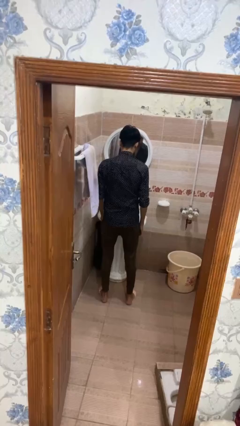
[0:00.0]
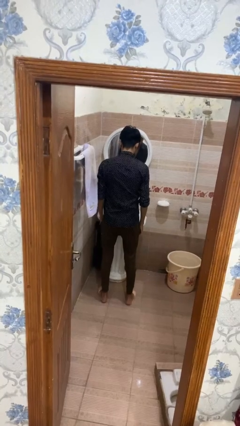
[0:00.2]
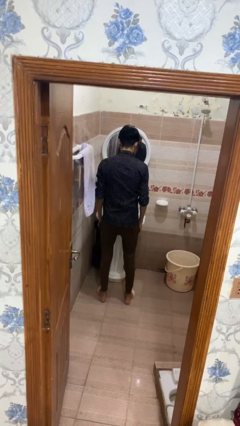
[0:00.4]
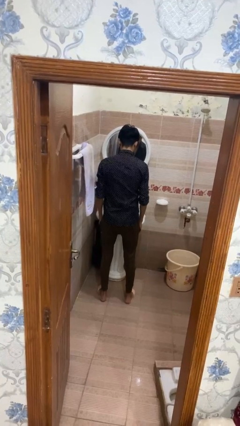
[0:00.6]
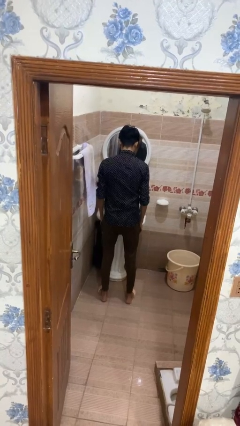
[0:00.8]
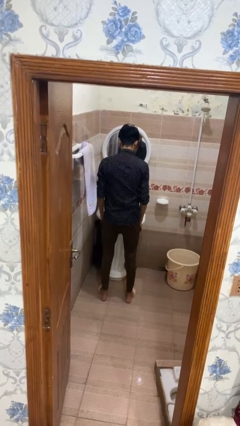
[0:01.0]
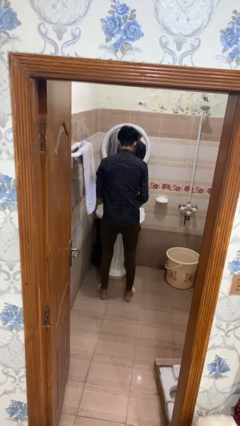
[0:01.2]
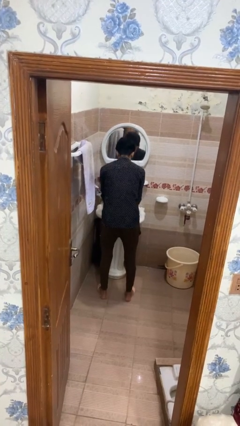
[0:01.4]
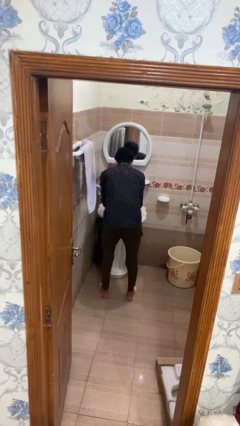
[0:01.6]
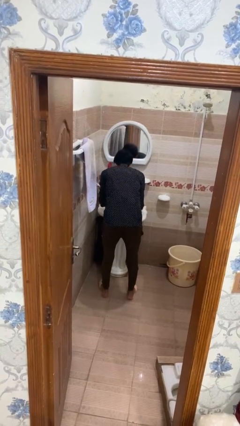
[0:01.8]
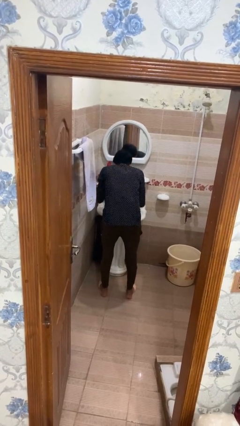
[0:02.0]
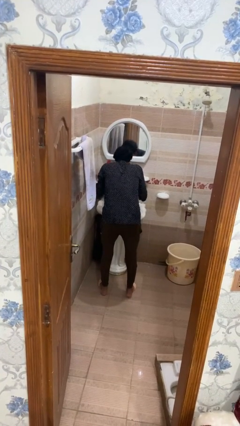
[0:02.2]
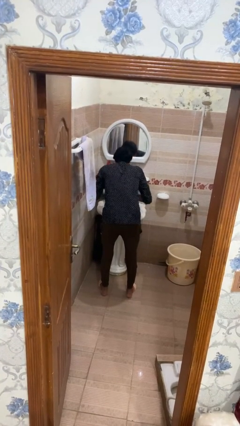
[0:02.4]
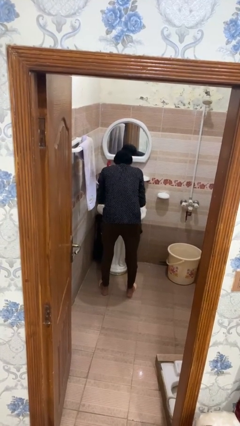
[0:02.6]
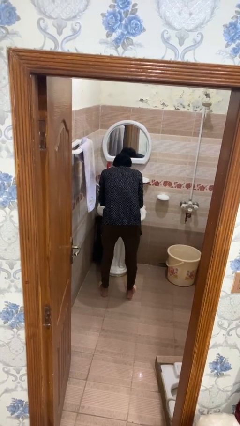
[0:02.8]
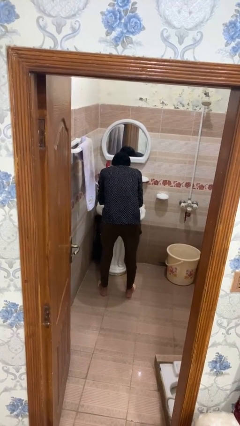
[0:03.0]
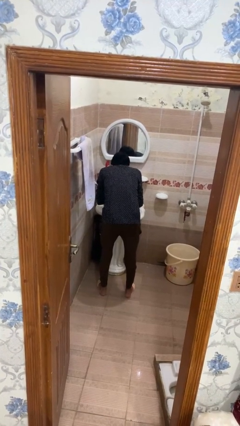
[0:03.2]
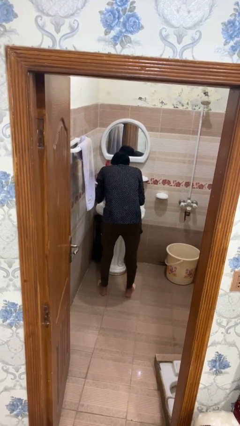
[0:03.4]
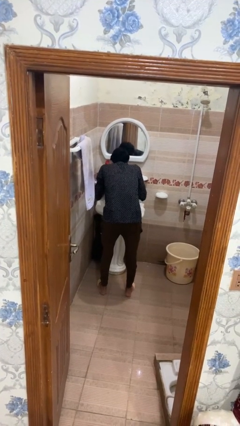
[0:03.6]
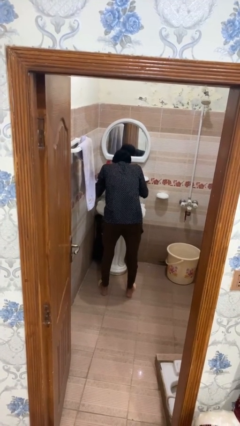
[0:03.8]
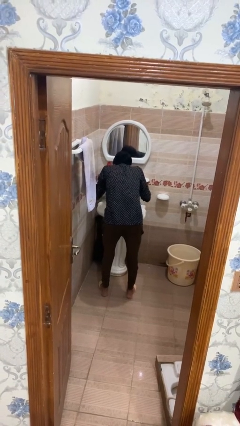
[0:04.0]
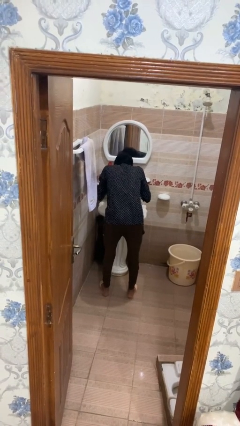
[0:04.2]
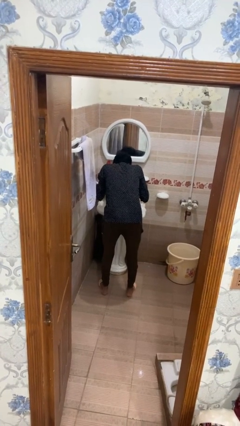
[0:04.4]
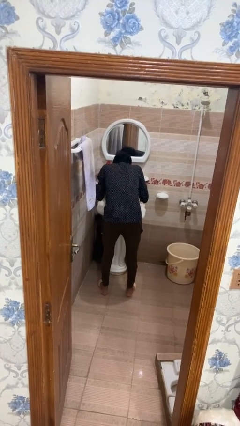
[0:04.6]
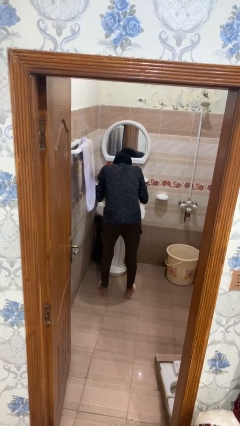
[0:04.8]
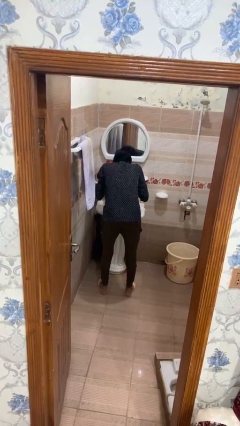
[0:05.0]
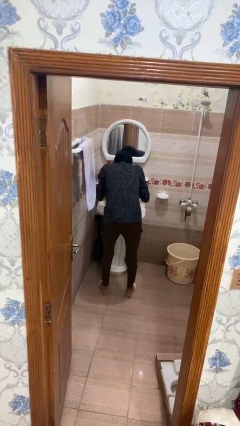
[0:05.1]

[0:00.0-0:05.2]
person washes face

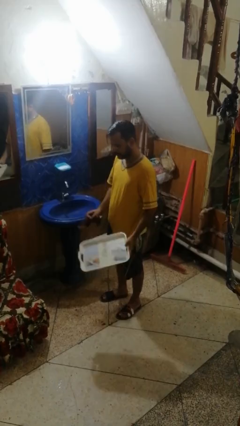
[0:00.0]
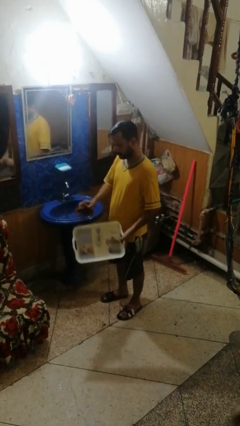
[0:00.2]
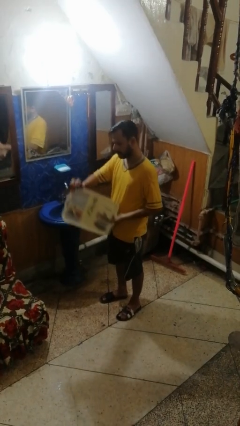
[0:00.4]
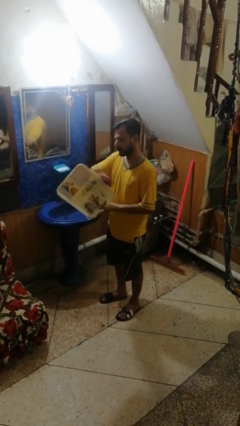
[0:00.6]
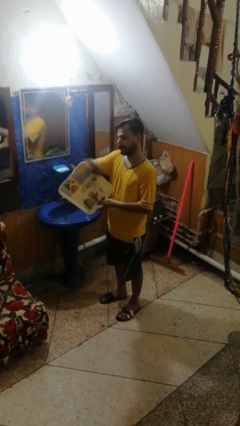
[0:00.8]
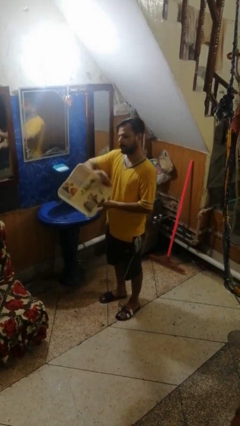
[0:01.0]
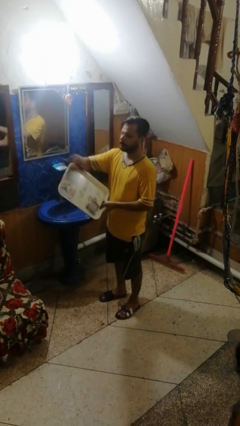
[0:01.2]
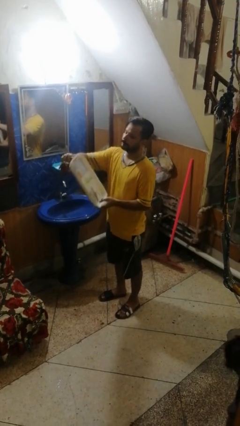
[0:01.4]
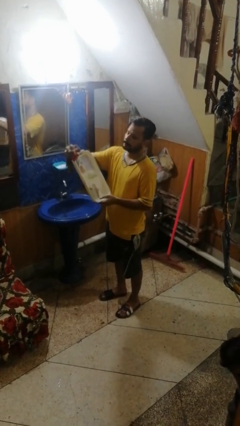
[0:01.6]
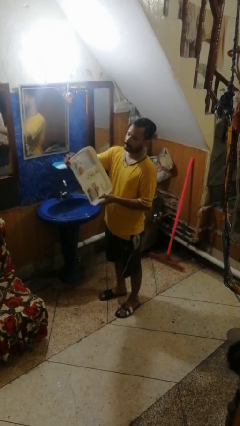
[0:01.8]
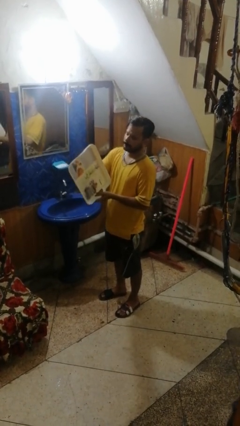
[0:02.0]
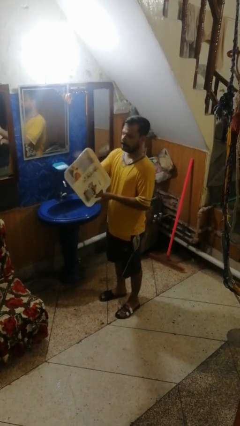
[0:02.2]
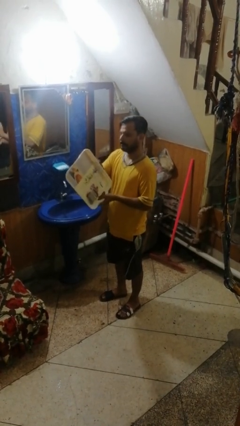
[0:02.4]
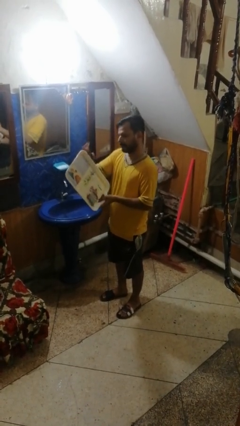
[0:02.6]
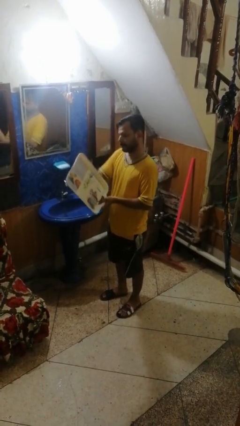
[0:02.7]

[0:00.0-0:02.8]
person dries dish

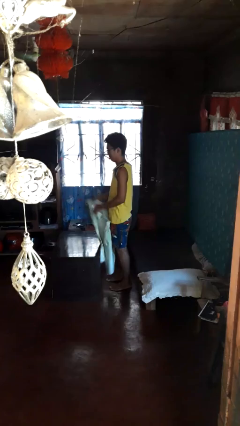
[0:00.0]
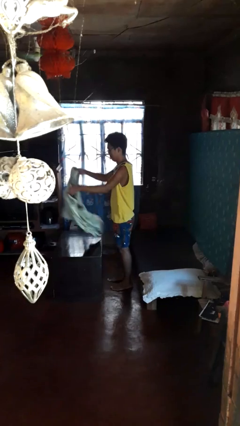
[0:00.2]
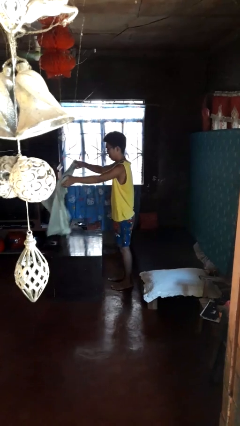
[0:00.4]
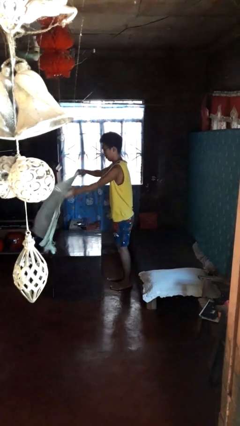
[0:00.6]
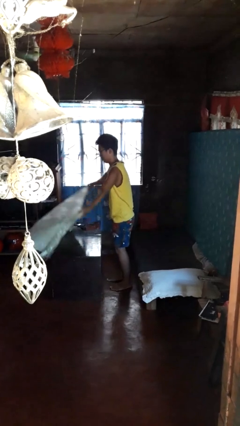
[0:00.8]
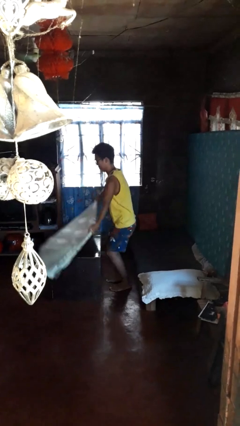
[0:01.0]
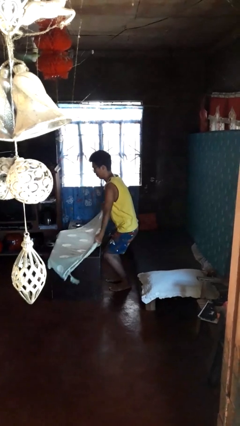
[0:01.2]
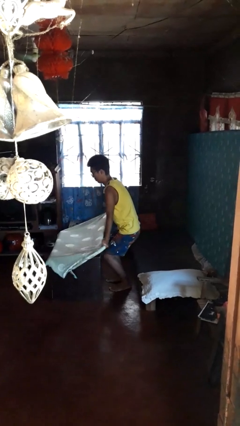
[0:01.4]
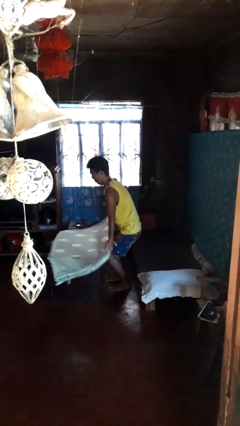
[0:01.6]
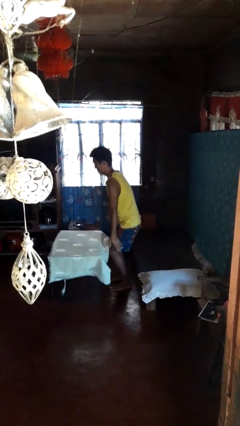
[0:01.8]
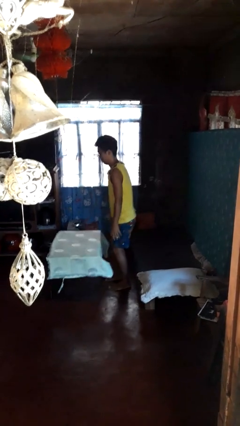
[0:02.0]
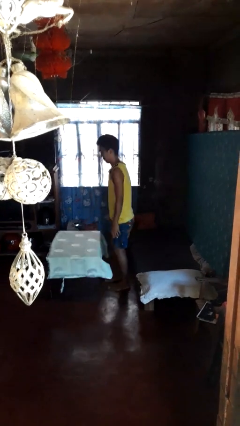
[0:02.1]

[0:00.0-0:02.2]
person spreads tablecloth

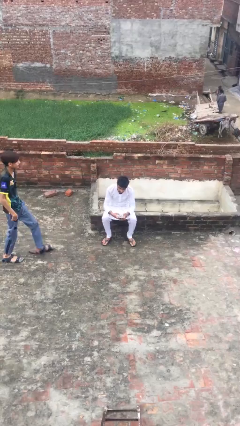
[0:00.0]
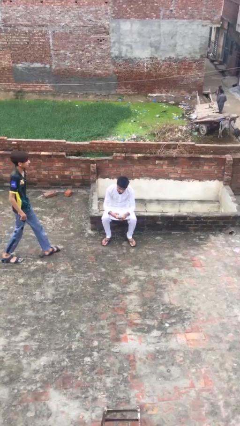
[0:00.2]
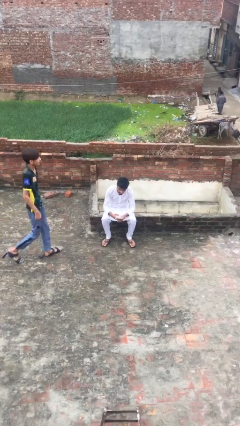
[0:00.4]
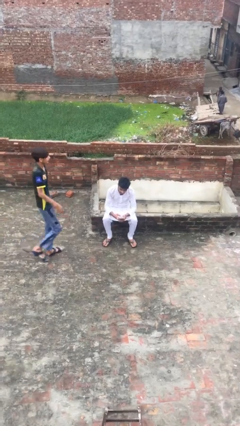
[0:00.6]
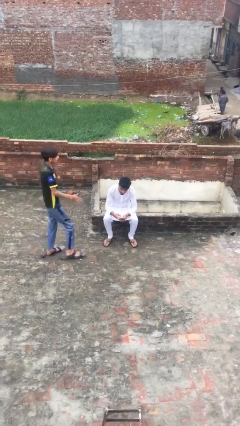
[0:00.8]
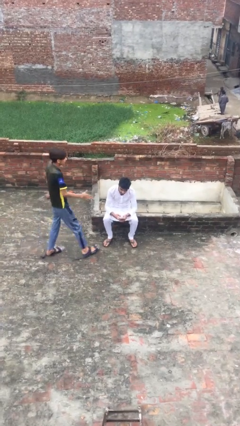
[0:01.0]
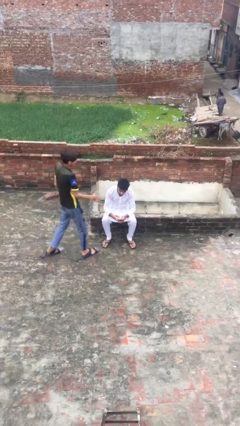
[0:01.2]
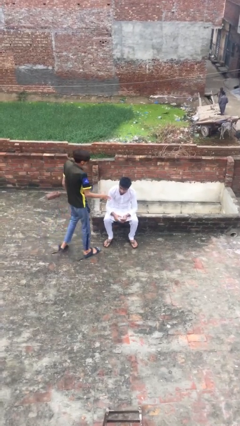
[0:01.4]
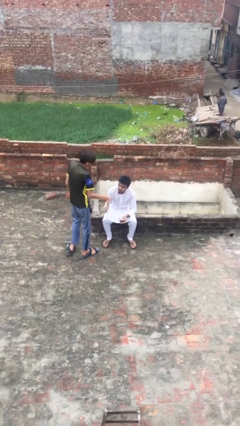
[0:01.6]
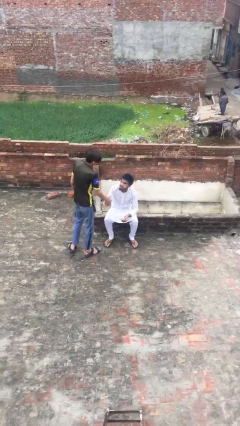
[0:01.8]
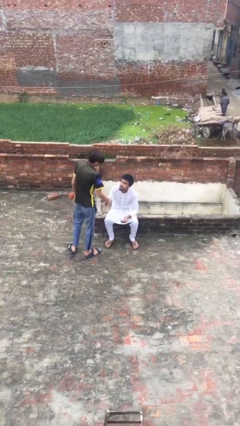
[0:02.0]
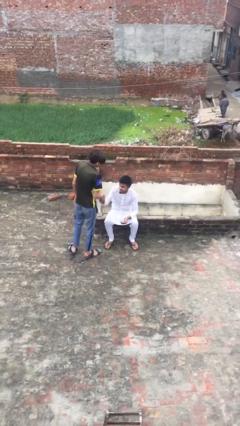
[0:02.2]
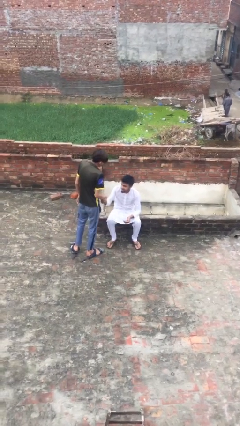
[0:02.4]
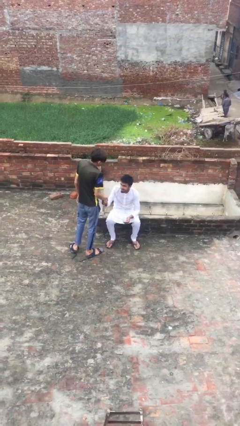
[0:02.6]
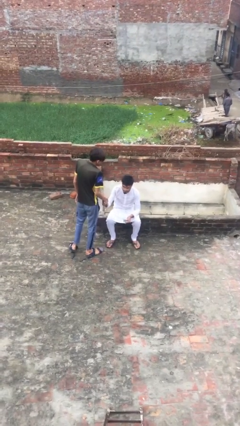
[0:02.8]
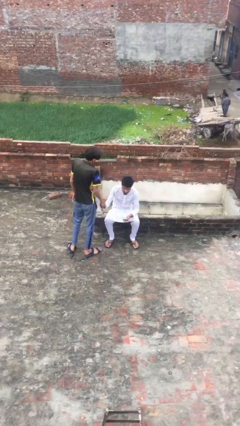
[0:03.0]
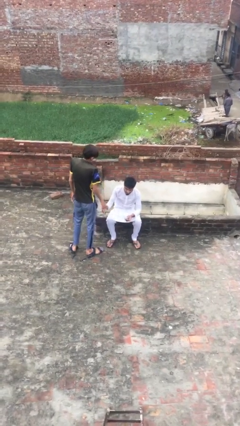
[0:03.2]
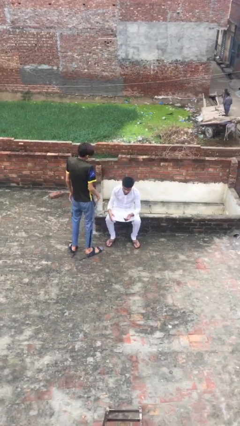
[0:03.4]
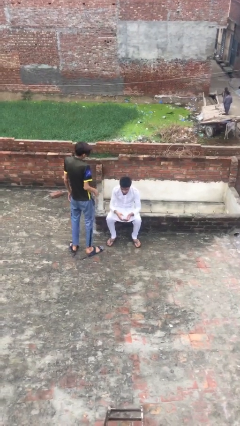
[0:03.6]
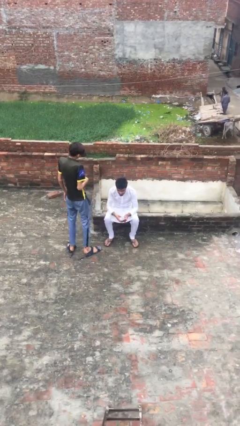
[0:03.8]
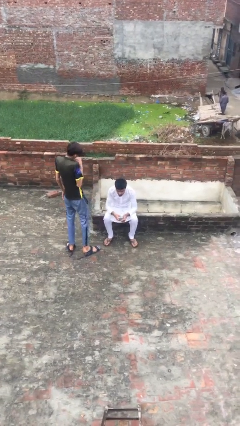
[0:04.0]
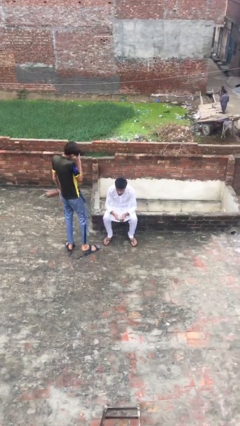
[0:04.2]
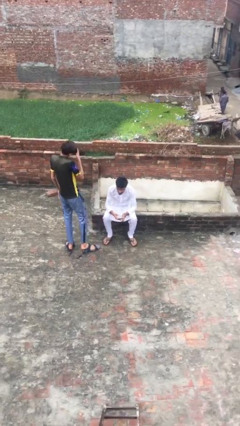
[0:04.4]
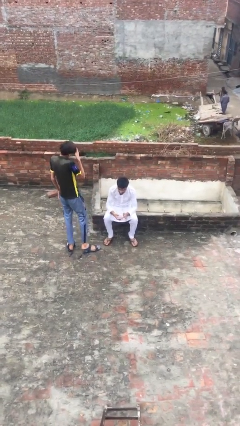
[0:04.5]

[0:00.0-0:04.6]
person shakes hand

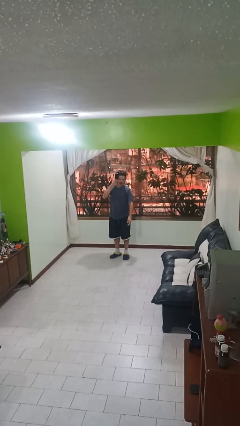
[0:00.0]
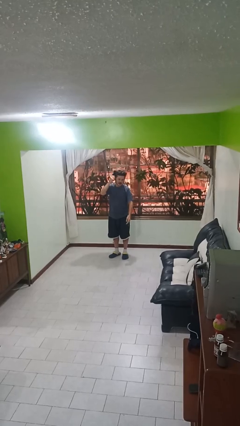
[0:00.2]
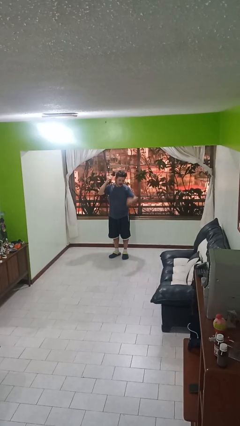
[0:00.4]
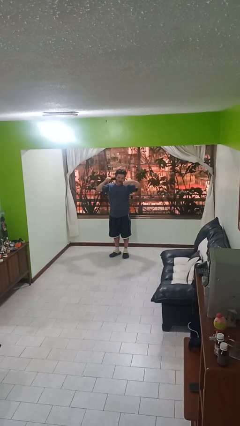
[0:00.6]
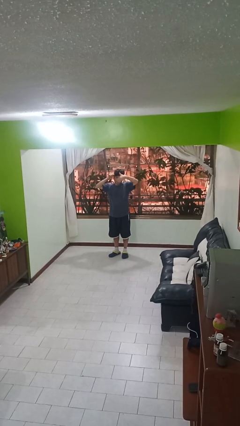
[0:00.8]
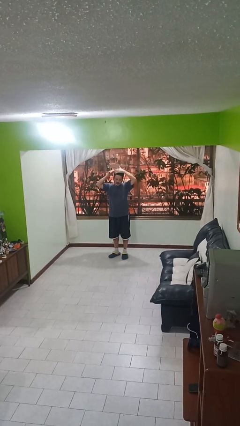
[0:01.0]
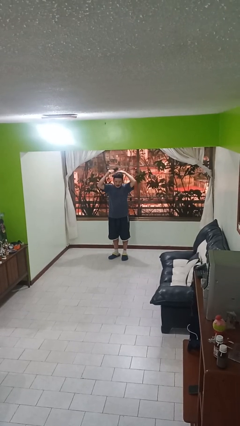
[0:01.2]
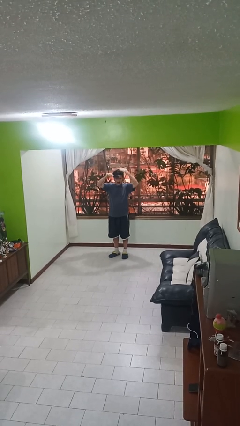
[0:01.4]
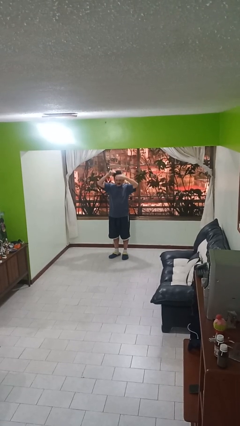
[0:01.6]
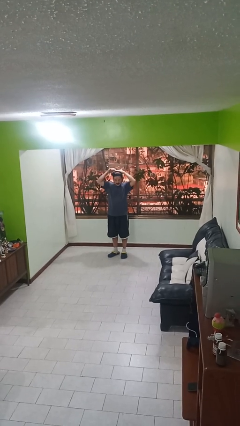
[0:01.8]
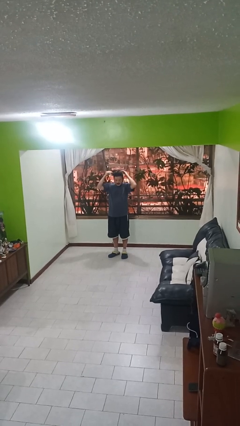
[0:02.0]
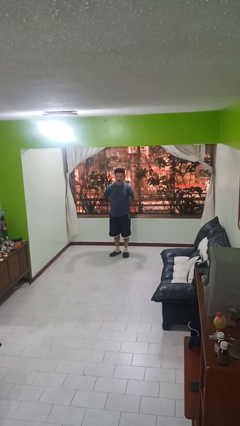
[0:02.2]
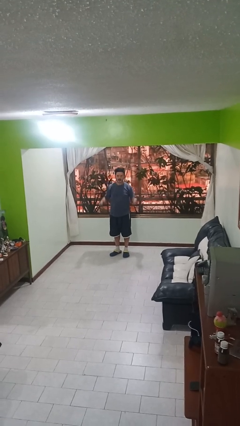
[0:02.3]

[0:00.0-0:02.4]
person brushes hair

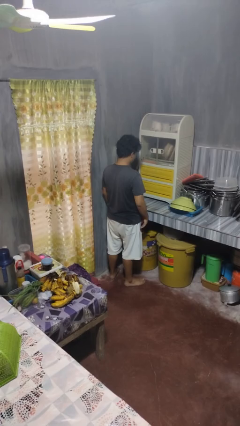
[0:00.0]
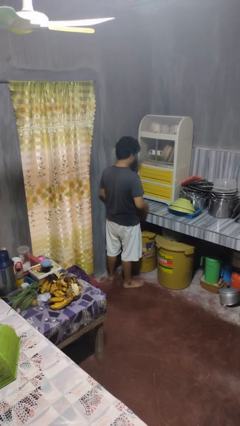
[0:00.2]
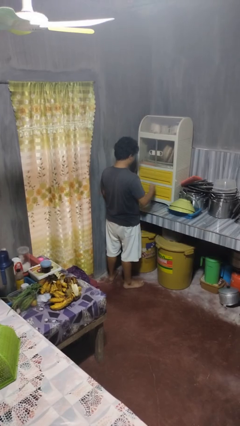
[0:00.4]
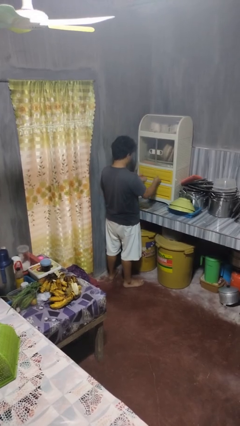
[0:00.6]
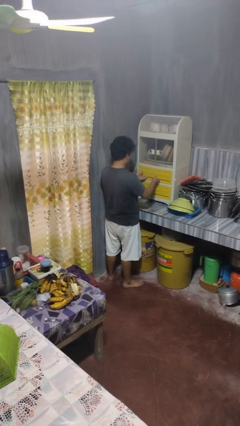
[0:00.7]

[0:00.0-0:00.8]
person opens kitchen drawer
